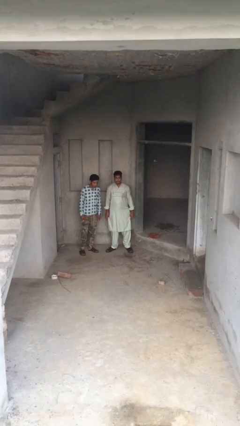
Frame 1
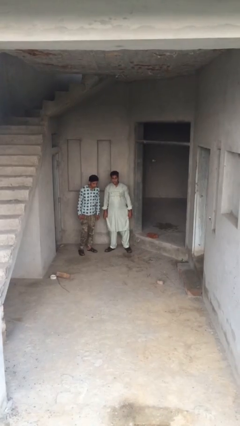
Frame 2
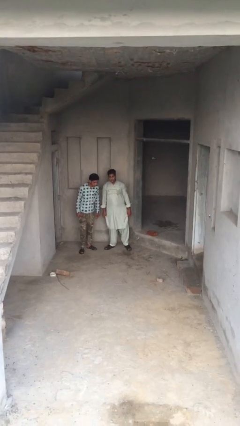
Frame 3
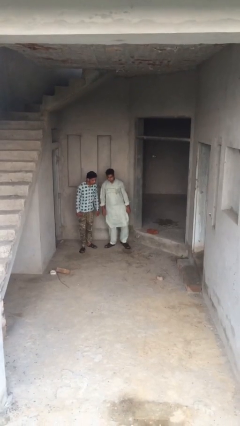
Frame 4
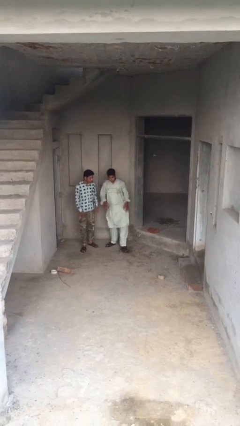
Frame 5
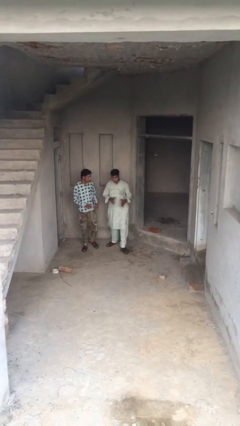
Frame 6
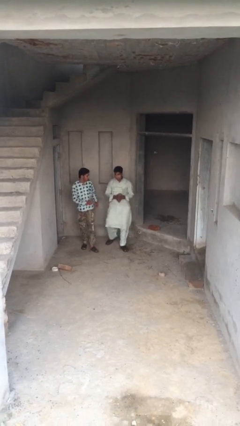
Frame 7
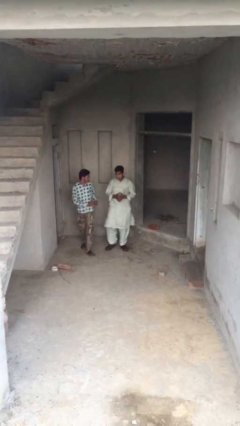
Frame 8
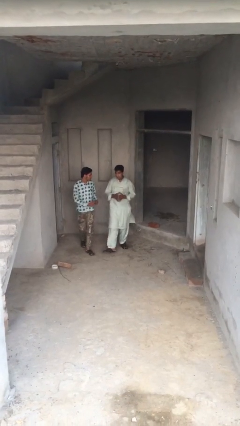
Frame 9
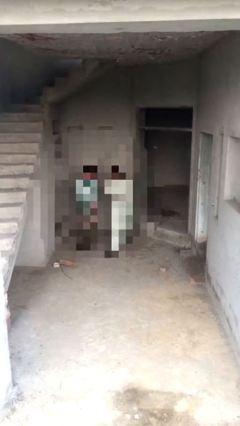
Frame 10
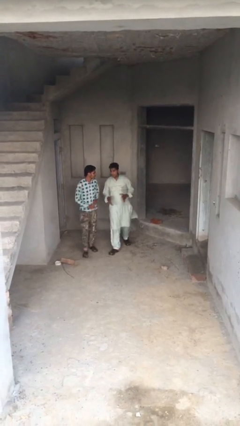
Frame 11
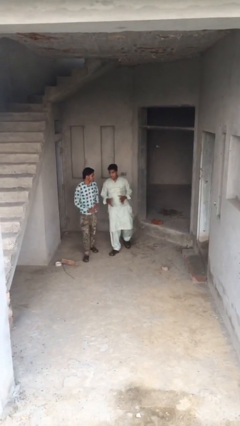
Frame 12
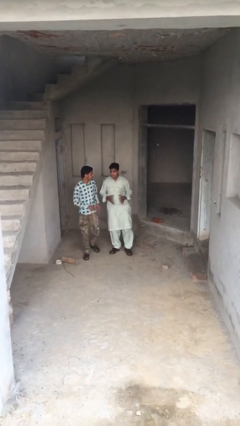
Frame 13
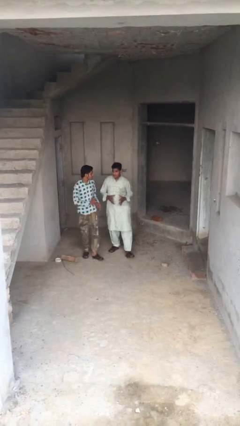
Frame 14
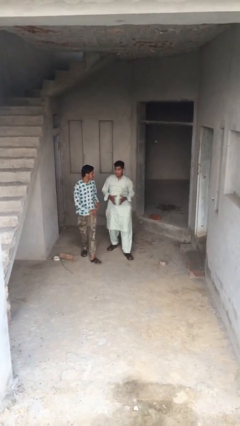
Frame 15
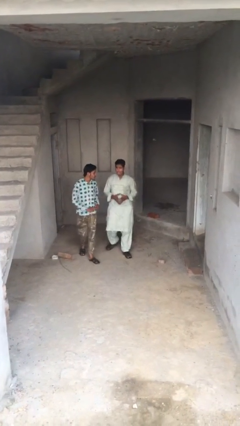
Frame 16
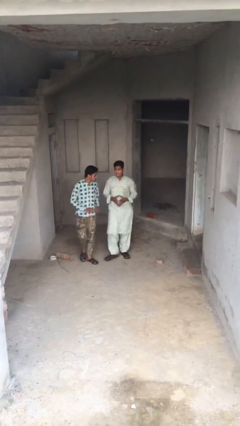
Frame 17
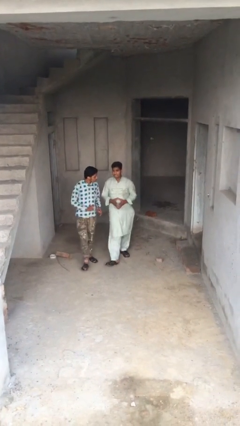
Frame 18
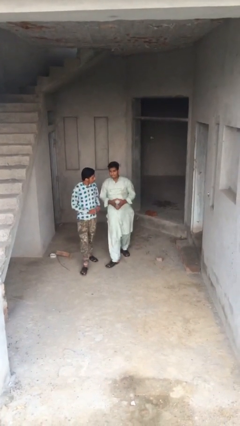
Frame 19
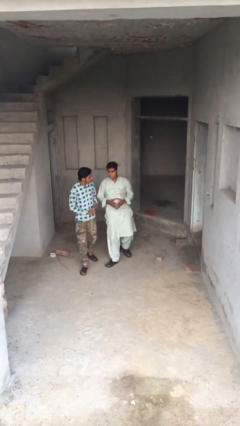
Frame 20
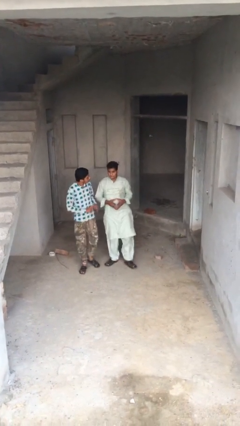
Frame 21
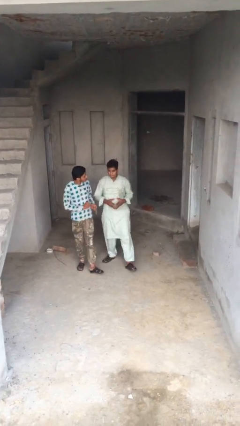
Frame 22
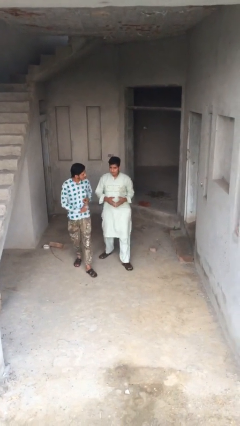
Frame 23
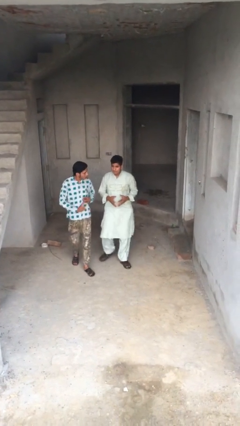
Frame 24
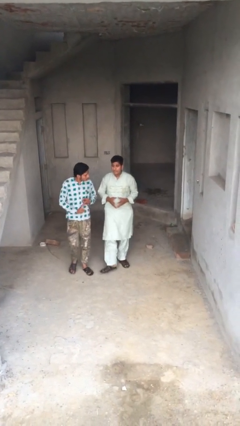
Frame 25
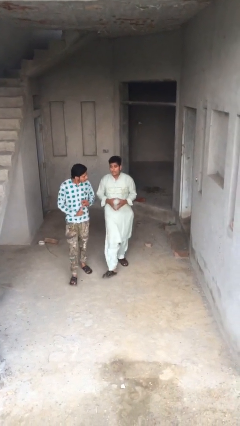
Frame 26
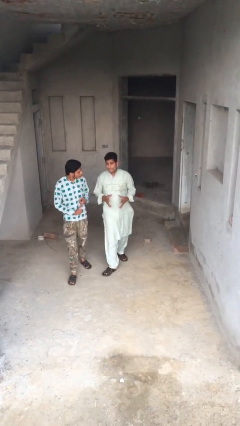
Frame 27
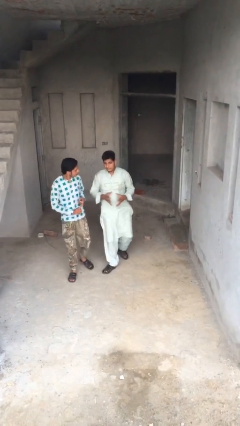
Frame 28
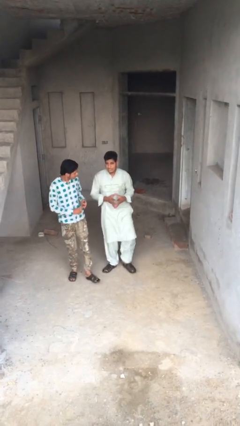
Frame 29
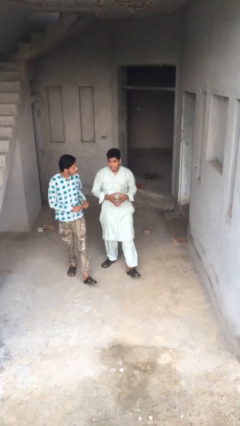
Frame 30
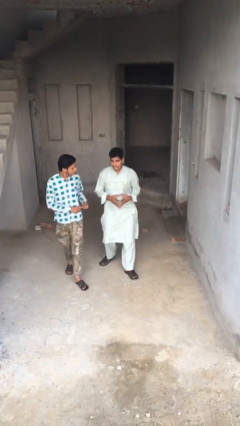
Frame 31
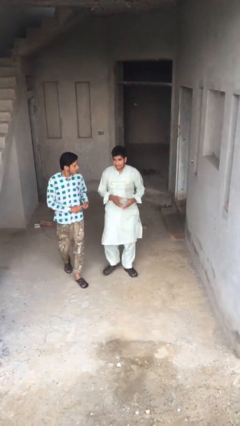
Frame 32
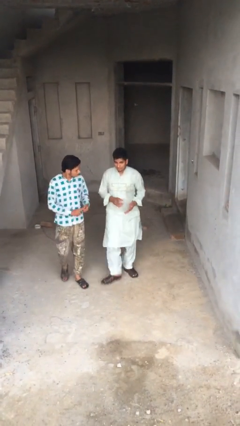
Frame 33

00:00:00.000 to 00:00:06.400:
person talks to person

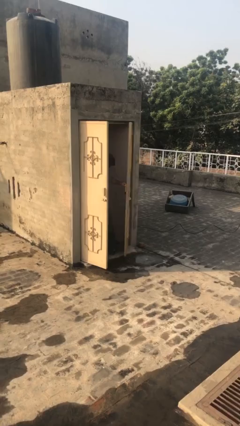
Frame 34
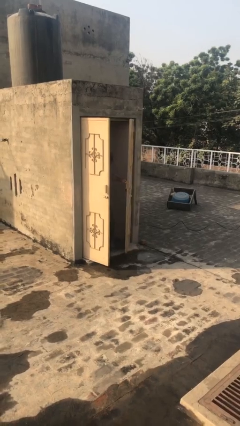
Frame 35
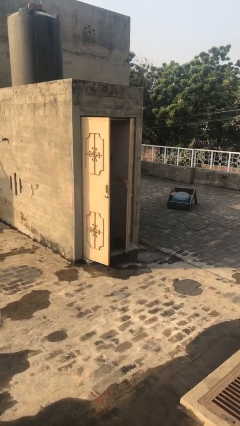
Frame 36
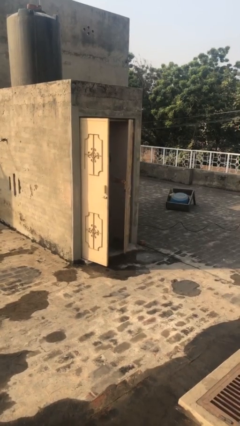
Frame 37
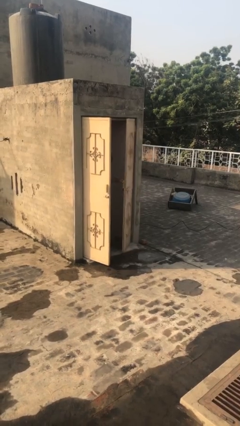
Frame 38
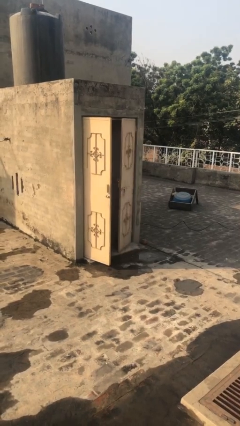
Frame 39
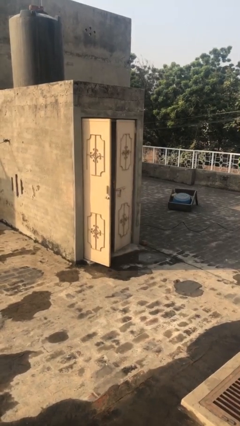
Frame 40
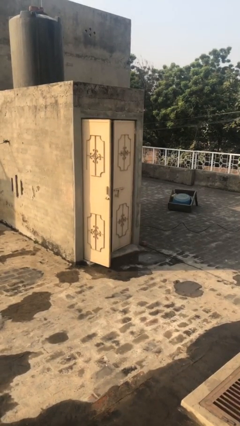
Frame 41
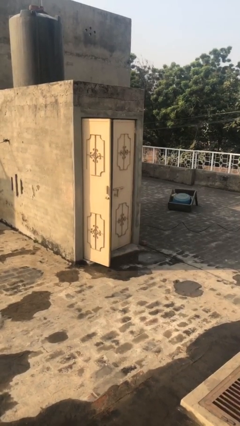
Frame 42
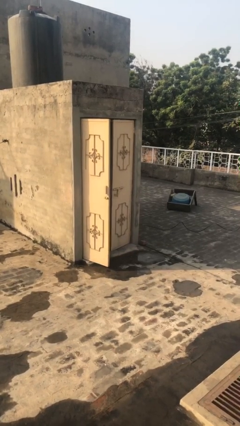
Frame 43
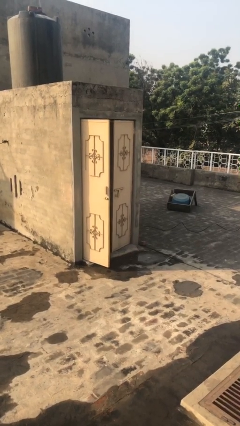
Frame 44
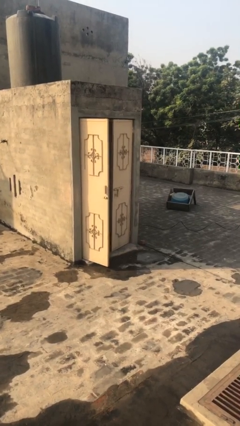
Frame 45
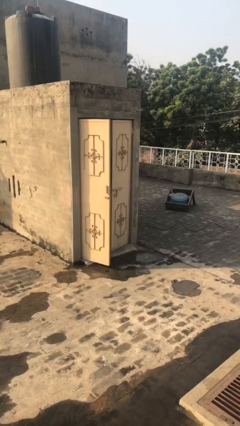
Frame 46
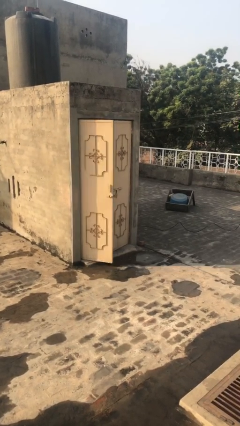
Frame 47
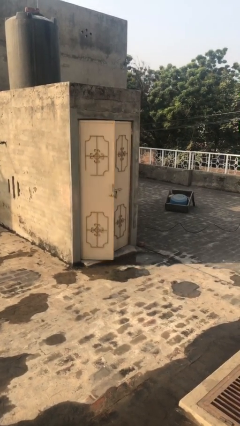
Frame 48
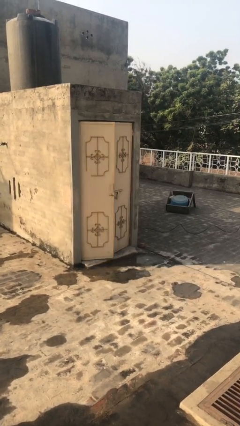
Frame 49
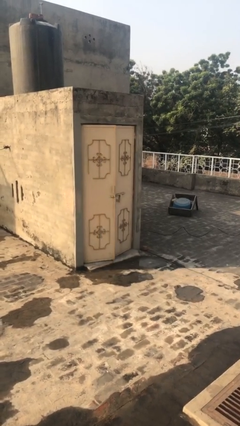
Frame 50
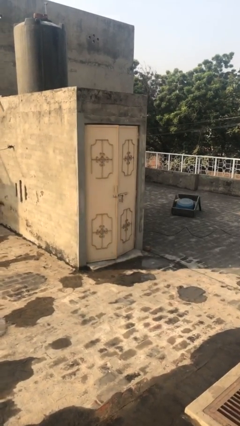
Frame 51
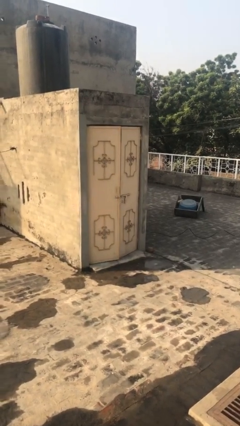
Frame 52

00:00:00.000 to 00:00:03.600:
person closes facility door

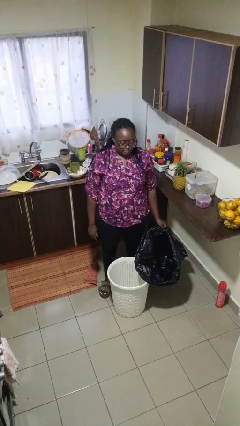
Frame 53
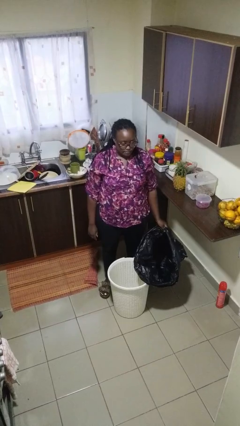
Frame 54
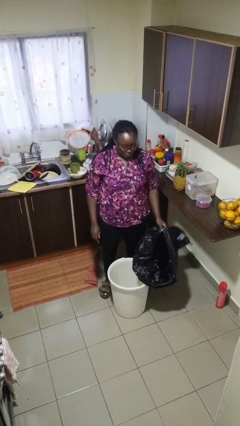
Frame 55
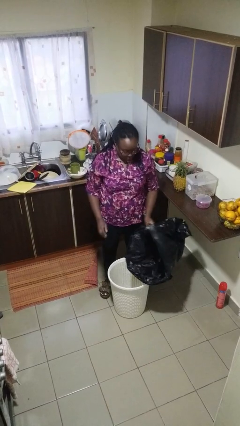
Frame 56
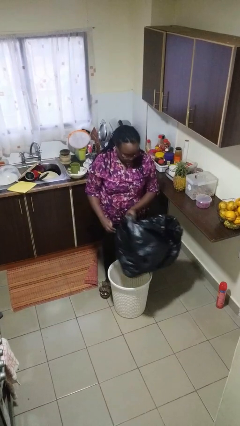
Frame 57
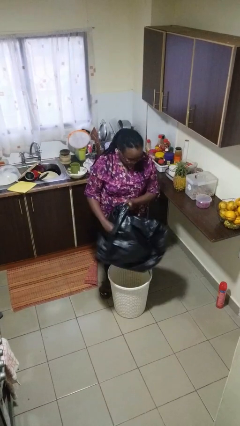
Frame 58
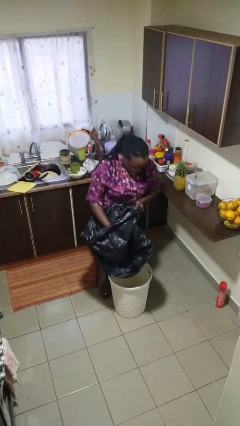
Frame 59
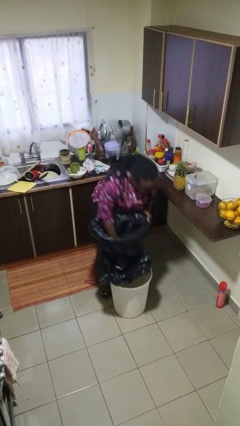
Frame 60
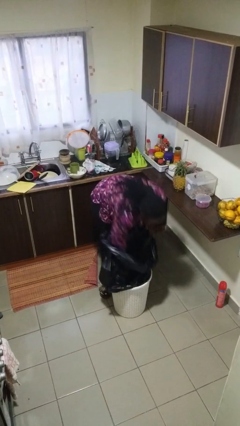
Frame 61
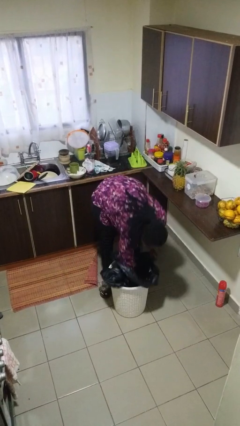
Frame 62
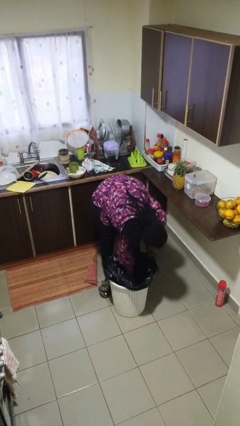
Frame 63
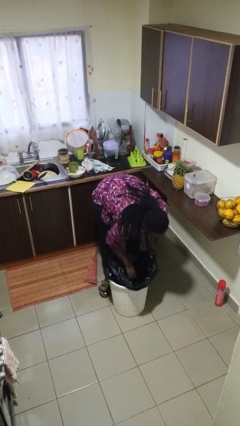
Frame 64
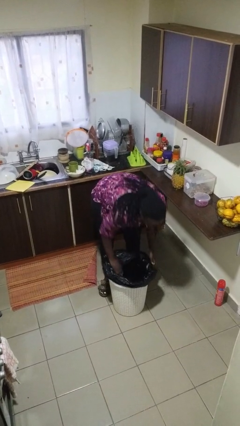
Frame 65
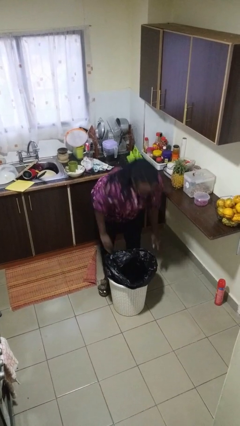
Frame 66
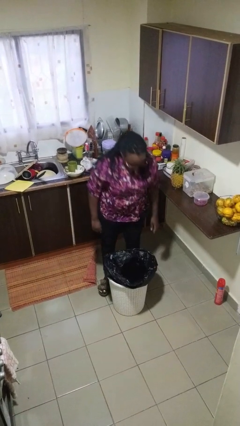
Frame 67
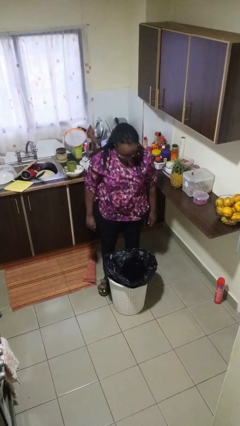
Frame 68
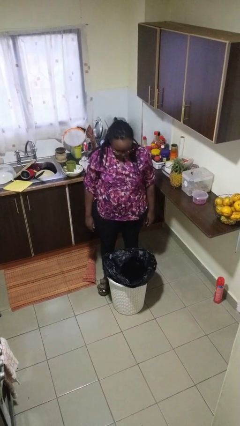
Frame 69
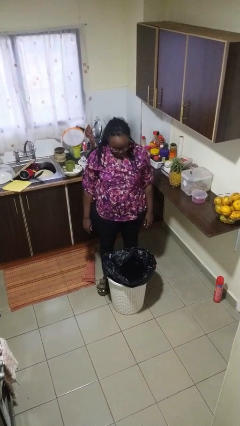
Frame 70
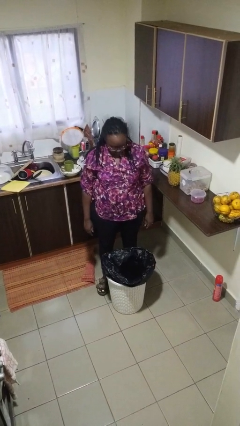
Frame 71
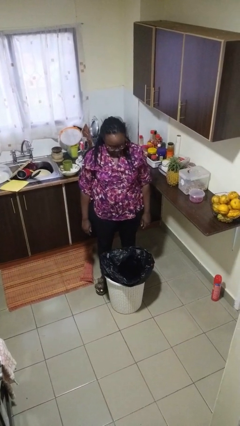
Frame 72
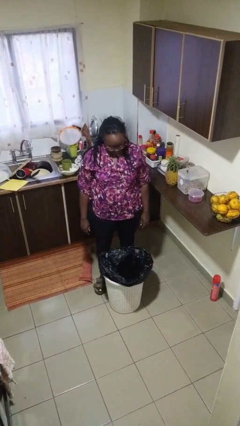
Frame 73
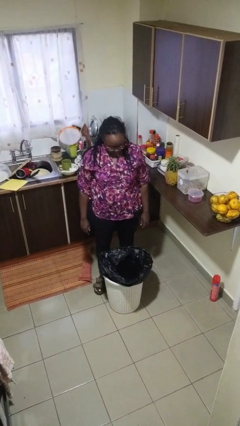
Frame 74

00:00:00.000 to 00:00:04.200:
person removes trashbag from trashcan

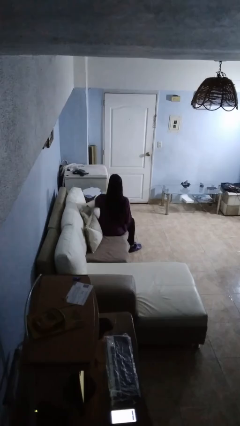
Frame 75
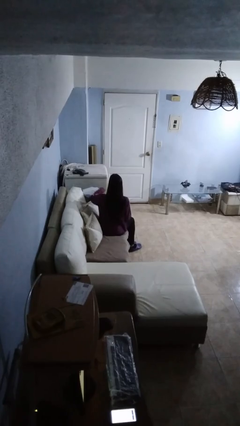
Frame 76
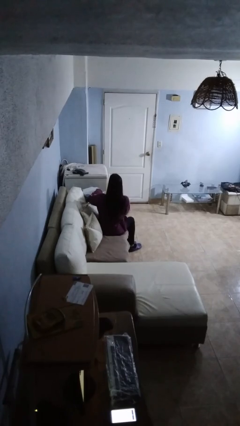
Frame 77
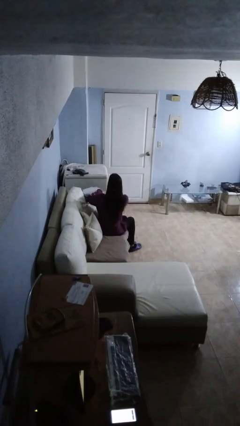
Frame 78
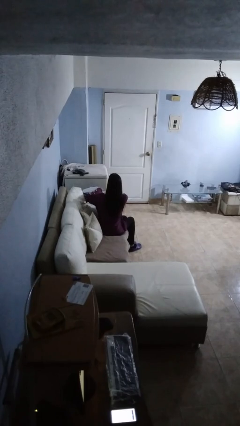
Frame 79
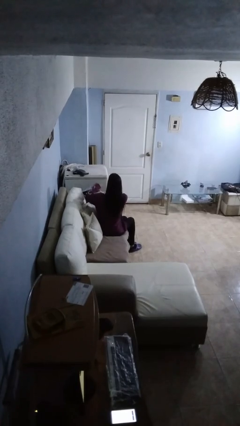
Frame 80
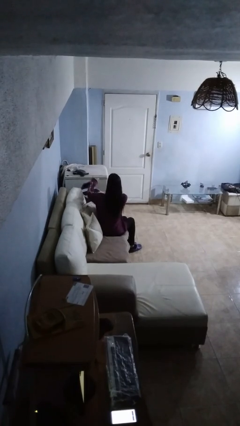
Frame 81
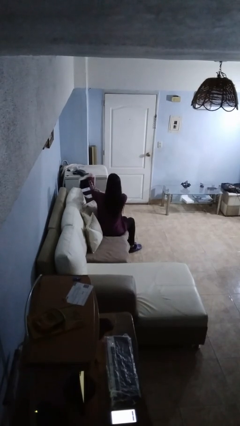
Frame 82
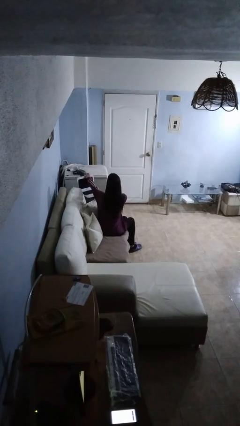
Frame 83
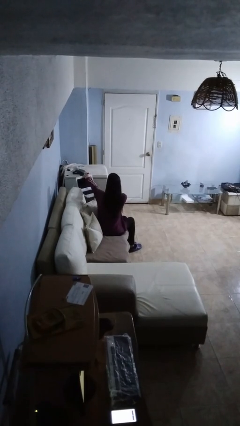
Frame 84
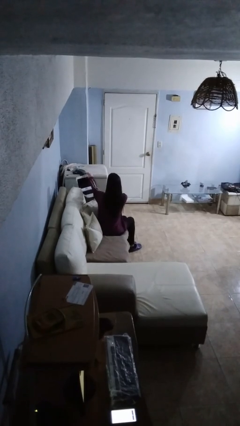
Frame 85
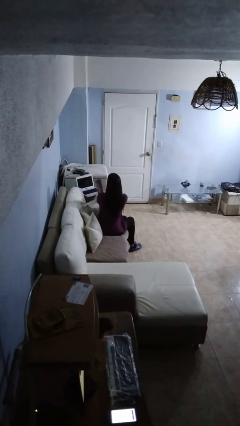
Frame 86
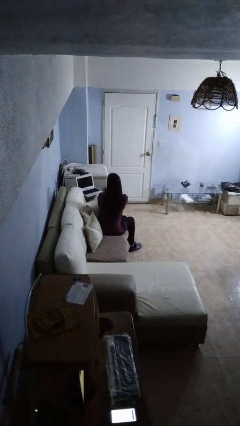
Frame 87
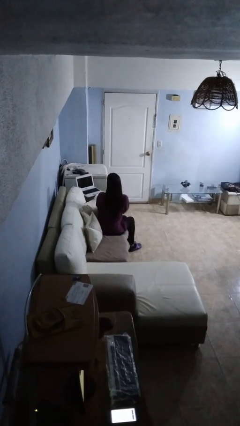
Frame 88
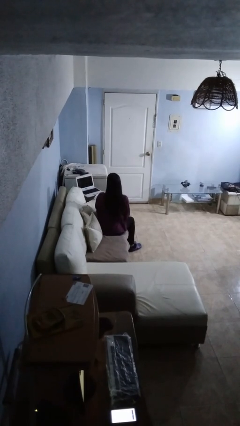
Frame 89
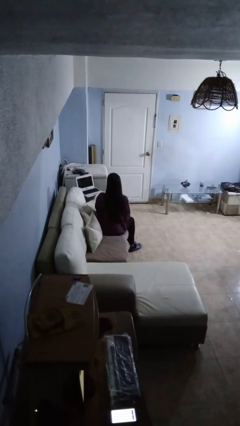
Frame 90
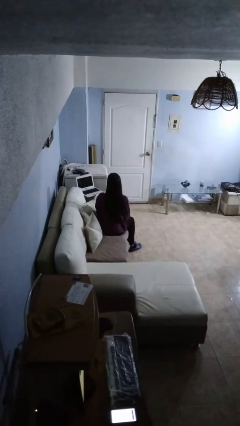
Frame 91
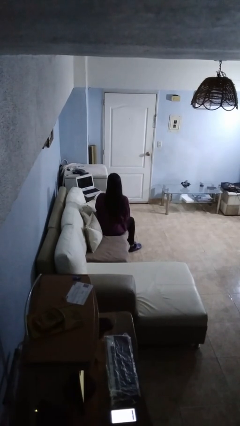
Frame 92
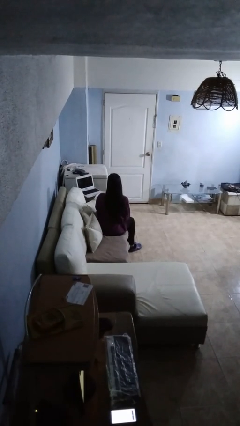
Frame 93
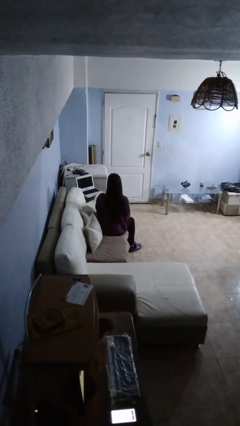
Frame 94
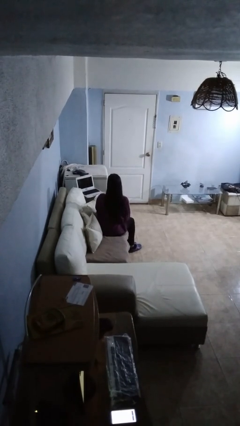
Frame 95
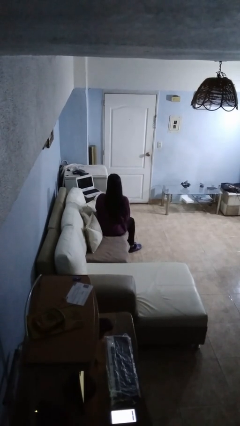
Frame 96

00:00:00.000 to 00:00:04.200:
person opens laptop
